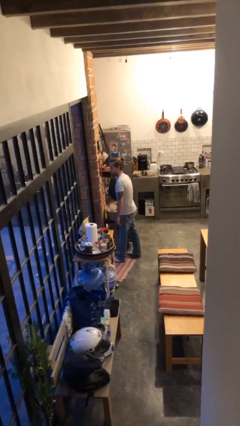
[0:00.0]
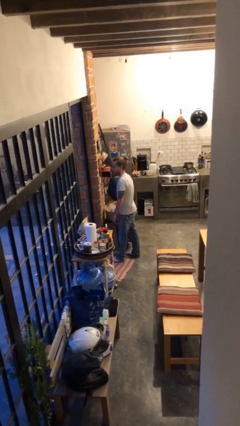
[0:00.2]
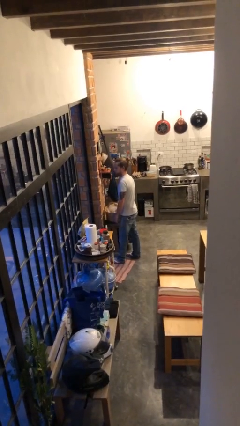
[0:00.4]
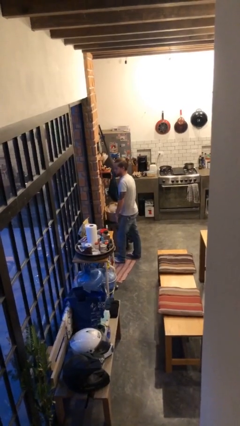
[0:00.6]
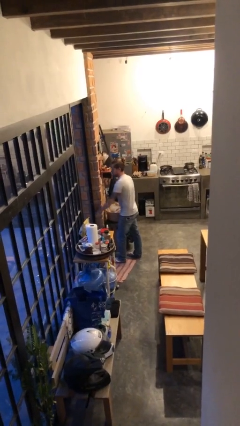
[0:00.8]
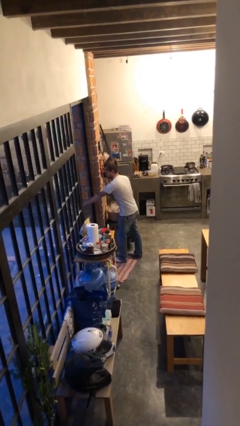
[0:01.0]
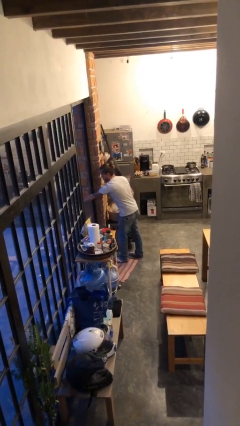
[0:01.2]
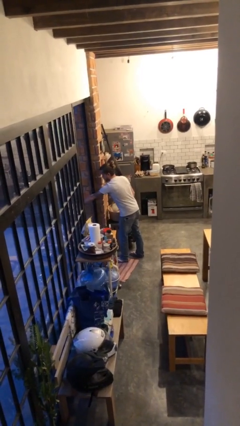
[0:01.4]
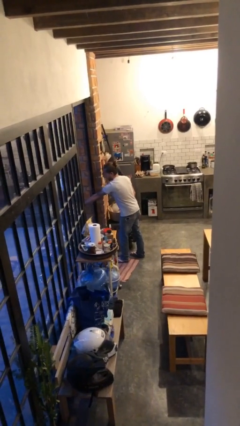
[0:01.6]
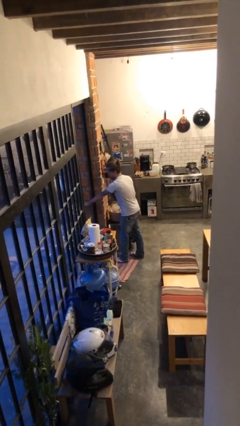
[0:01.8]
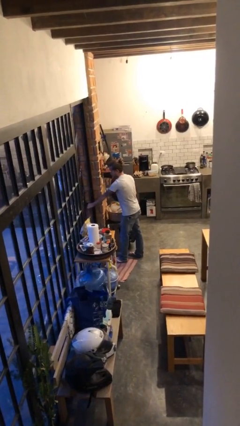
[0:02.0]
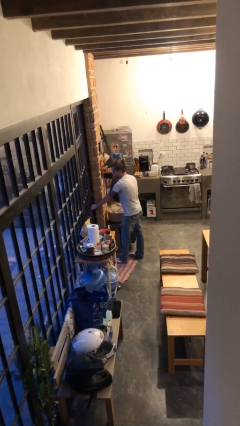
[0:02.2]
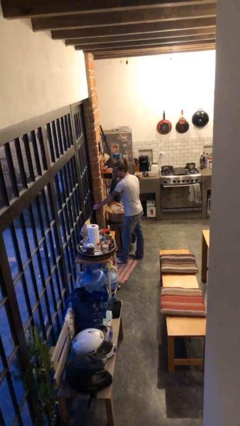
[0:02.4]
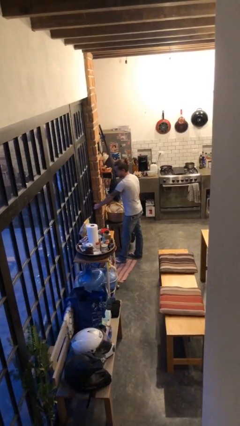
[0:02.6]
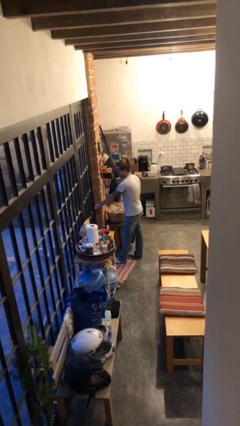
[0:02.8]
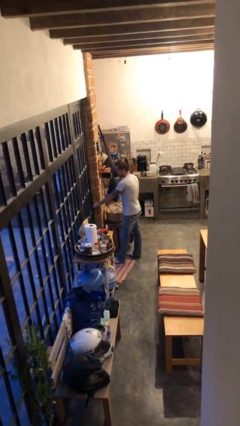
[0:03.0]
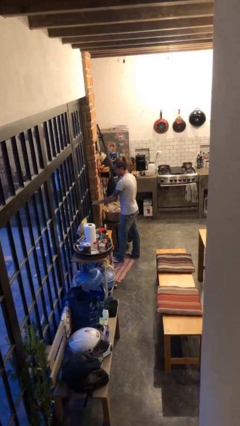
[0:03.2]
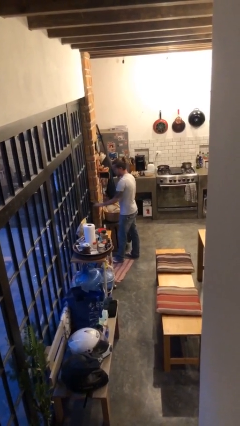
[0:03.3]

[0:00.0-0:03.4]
person closes facility door

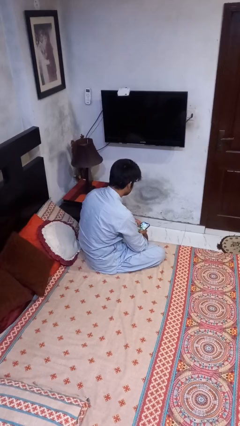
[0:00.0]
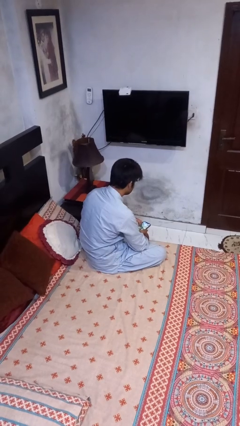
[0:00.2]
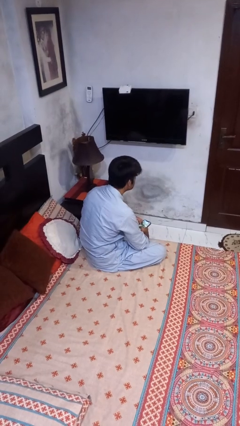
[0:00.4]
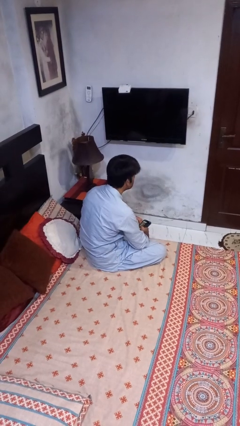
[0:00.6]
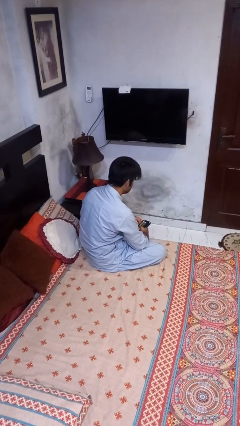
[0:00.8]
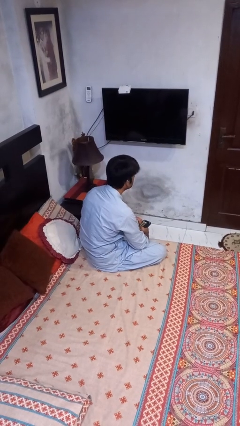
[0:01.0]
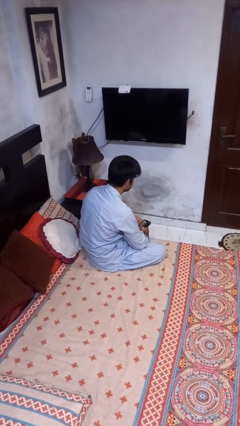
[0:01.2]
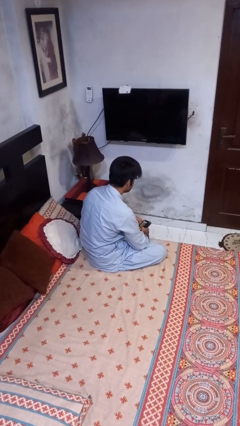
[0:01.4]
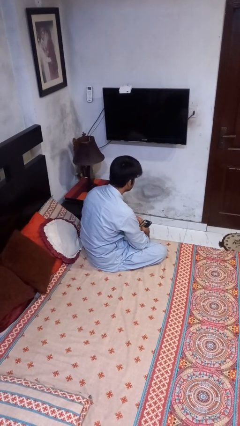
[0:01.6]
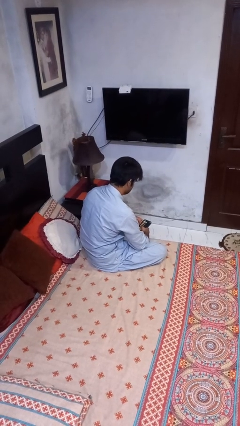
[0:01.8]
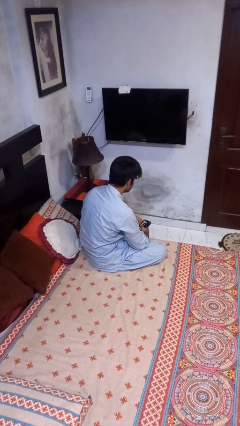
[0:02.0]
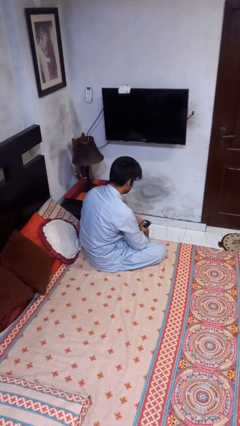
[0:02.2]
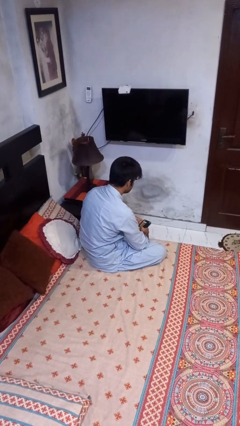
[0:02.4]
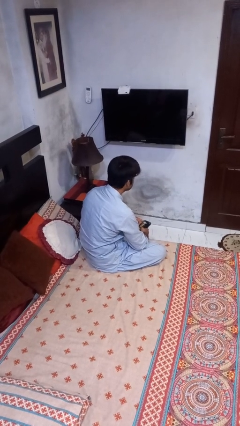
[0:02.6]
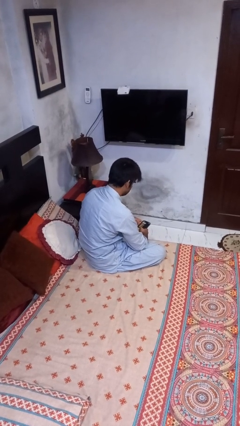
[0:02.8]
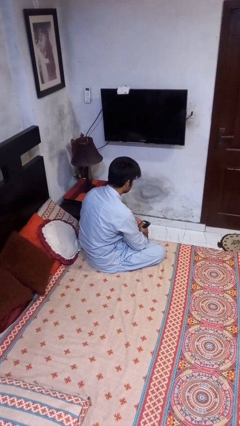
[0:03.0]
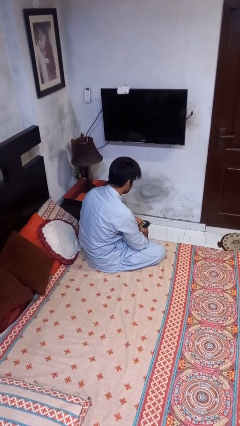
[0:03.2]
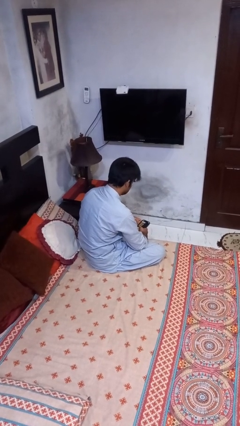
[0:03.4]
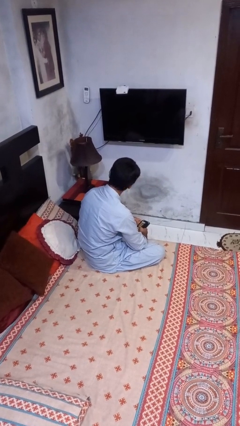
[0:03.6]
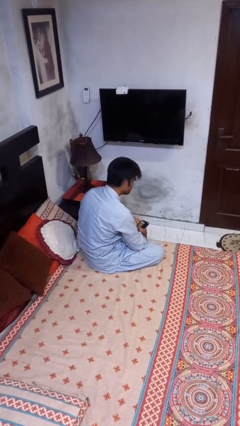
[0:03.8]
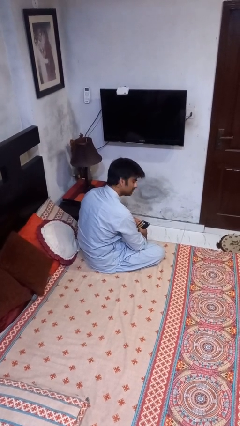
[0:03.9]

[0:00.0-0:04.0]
person nods head

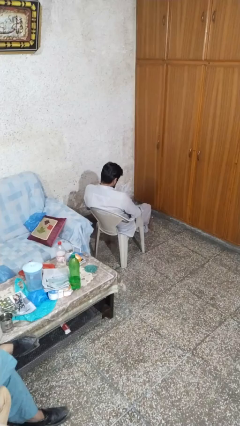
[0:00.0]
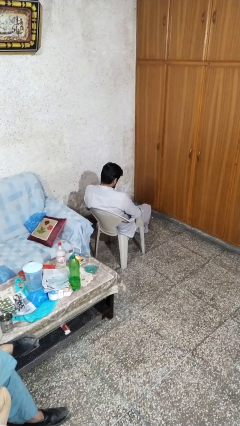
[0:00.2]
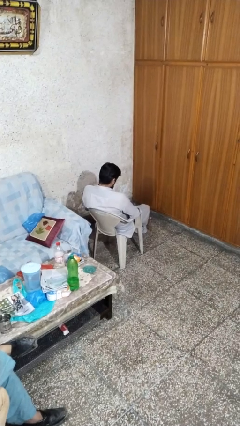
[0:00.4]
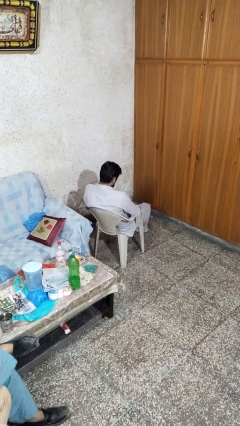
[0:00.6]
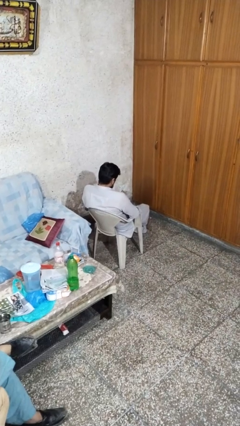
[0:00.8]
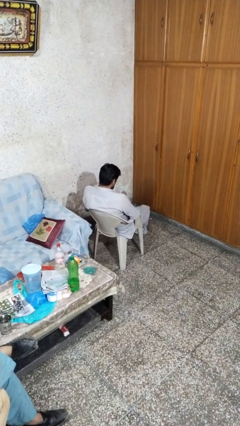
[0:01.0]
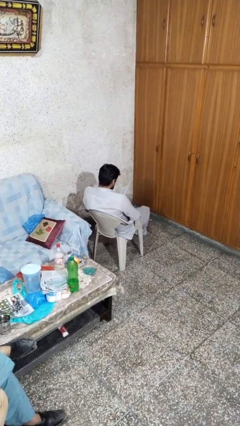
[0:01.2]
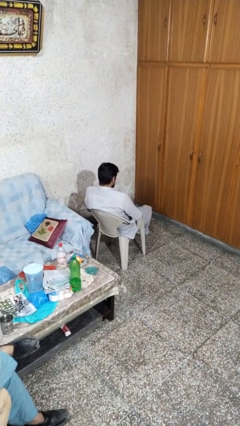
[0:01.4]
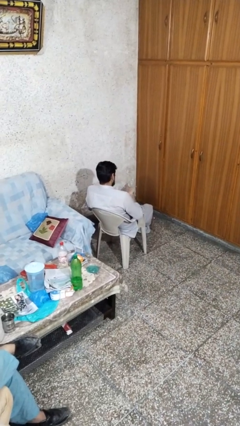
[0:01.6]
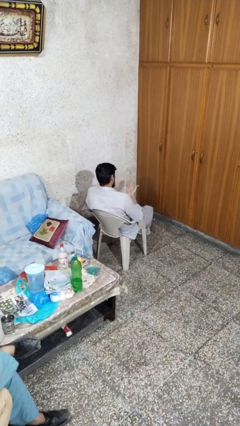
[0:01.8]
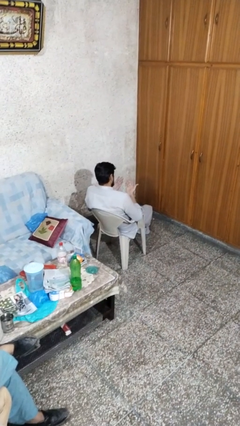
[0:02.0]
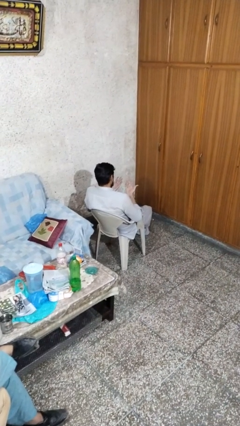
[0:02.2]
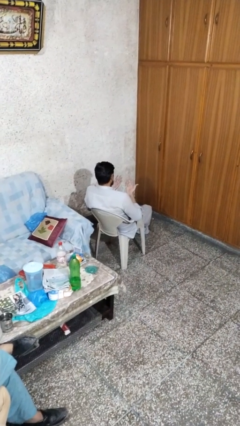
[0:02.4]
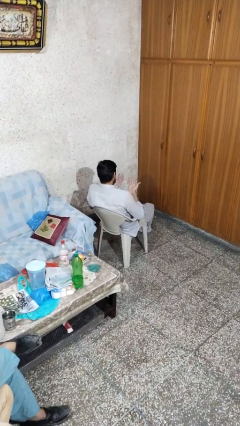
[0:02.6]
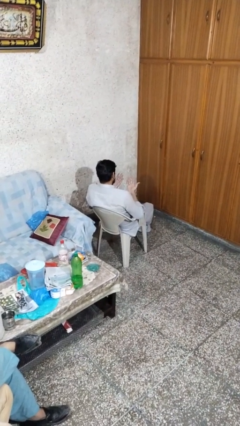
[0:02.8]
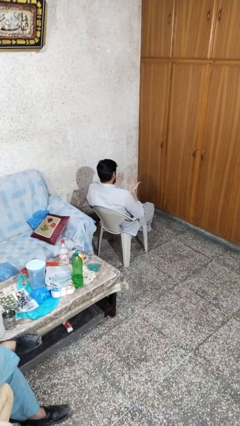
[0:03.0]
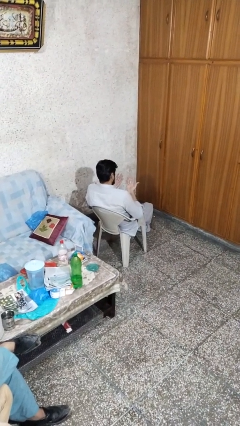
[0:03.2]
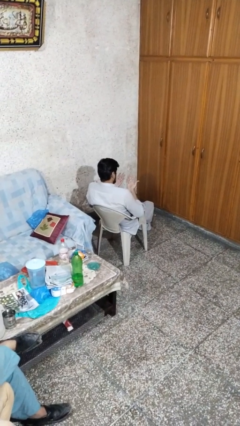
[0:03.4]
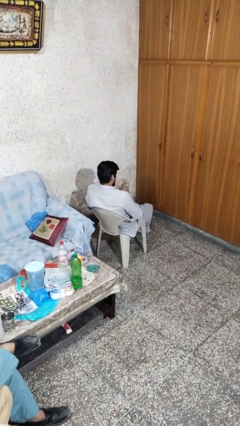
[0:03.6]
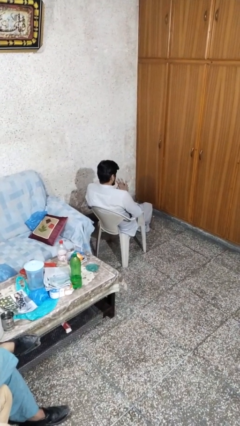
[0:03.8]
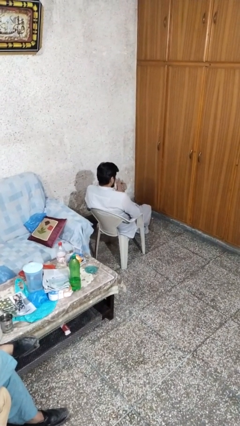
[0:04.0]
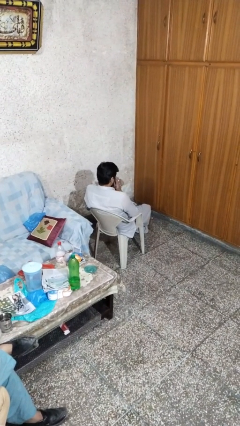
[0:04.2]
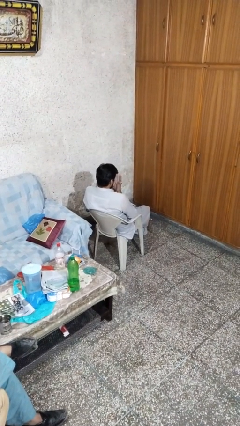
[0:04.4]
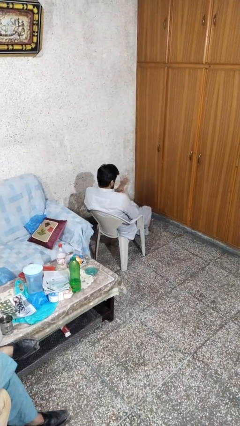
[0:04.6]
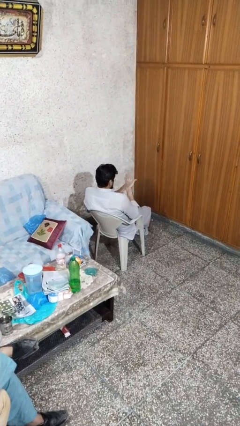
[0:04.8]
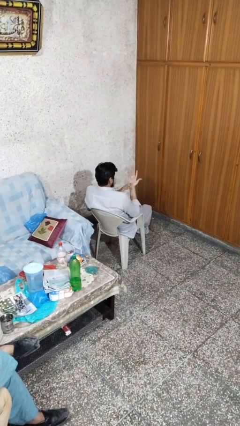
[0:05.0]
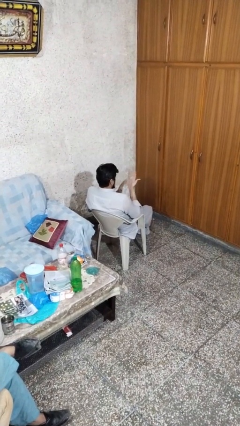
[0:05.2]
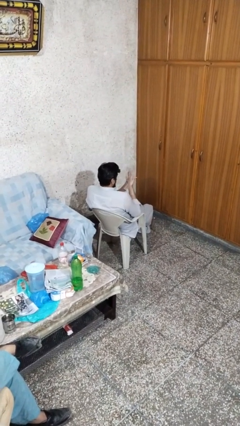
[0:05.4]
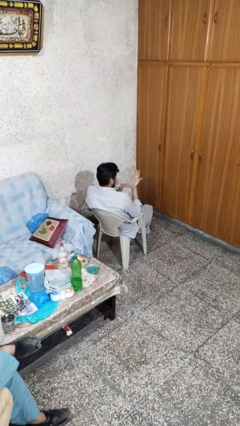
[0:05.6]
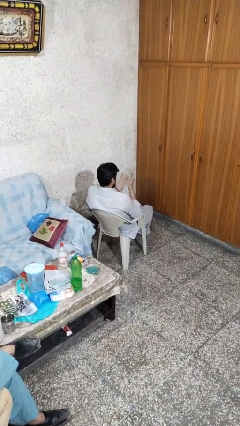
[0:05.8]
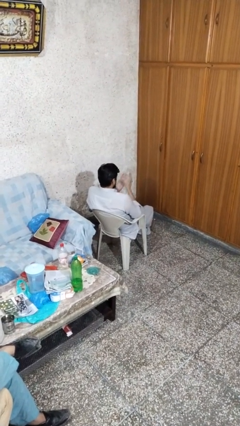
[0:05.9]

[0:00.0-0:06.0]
person looks at hands in lap

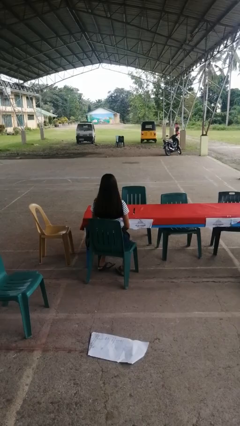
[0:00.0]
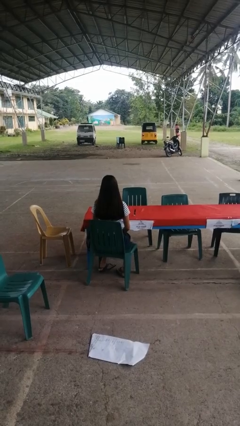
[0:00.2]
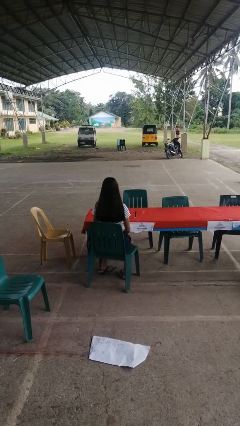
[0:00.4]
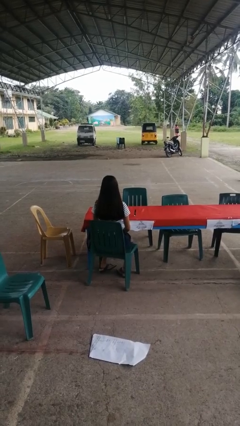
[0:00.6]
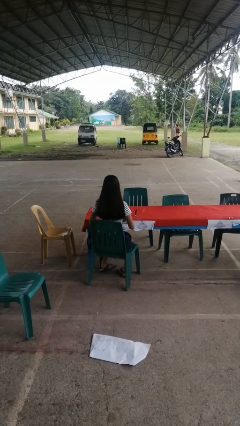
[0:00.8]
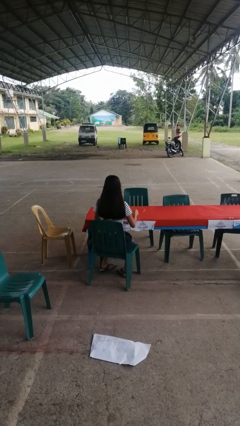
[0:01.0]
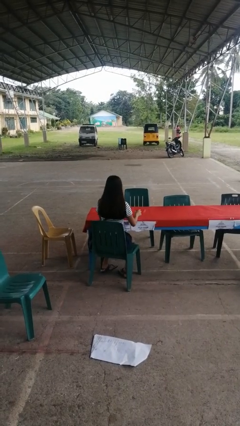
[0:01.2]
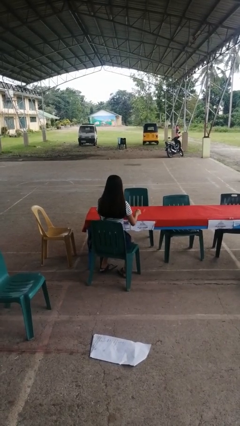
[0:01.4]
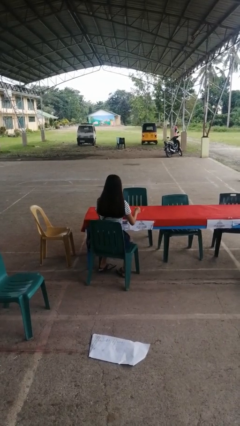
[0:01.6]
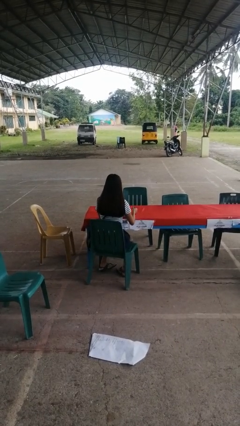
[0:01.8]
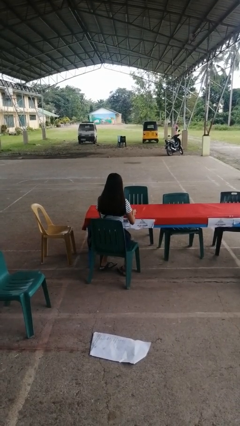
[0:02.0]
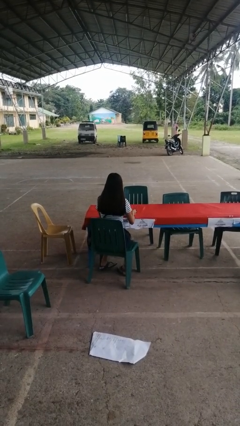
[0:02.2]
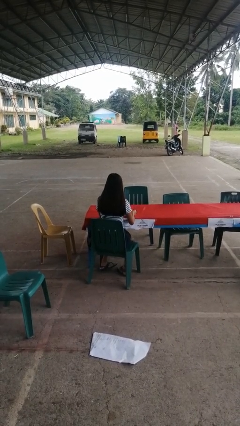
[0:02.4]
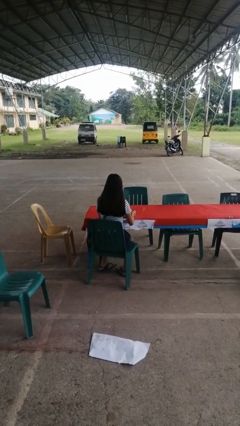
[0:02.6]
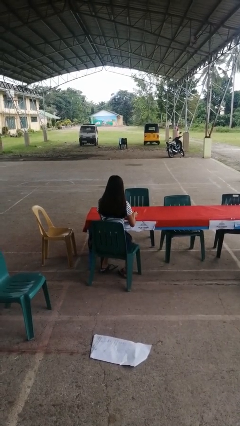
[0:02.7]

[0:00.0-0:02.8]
person paints fingernails

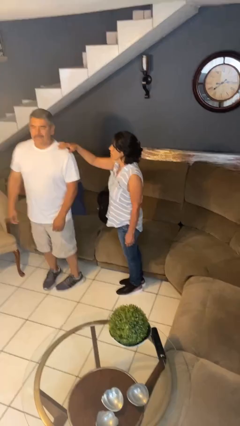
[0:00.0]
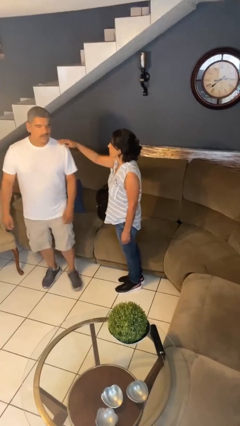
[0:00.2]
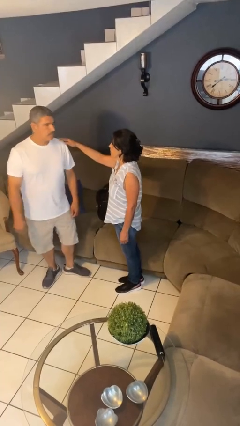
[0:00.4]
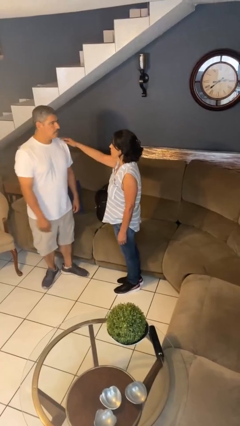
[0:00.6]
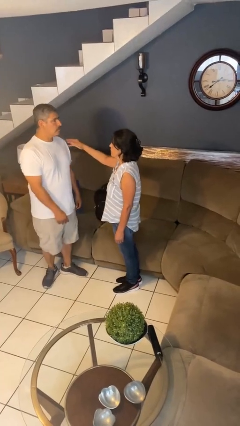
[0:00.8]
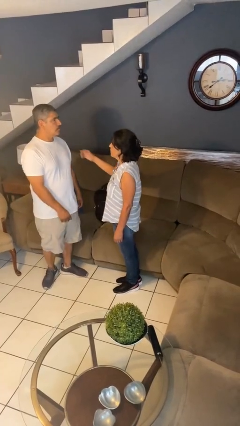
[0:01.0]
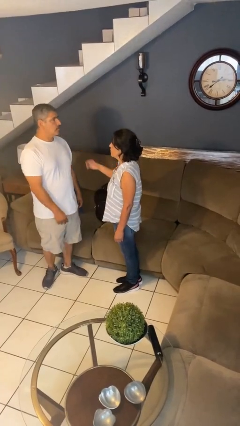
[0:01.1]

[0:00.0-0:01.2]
person spins person around

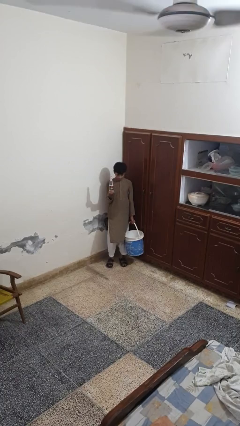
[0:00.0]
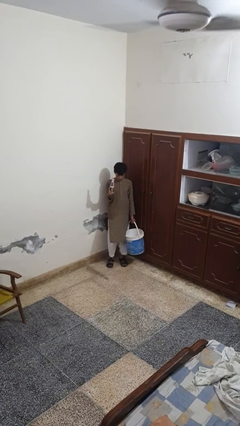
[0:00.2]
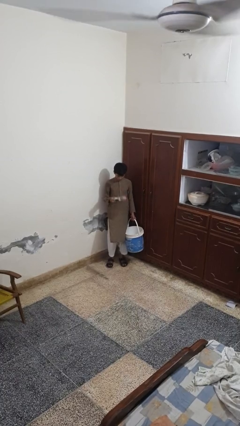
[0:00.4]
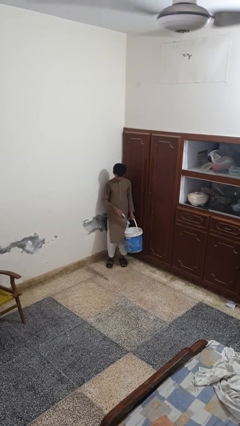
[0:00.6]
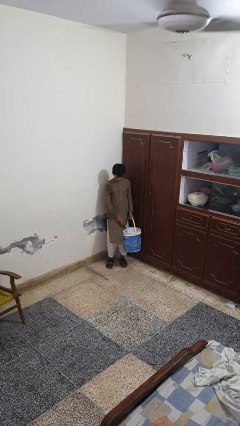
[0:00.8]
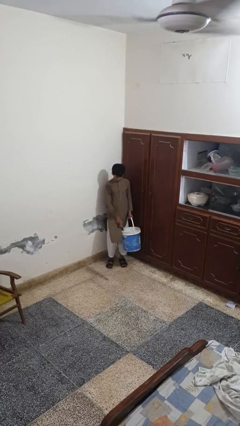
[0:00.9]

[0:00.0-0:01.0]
person puts object into basket
